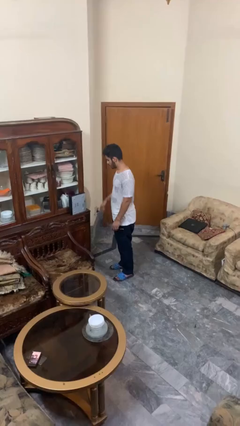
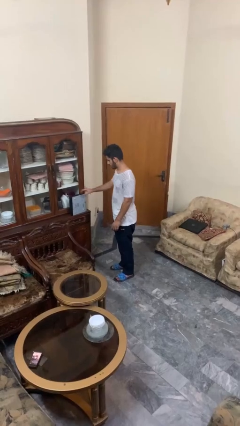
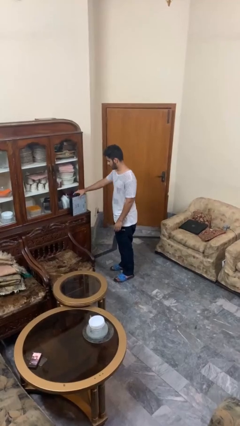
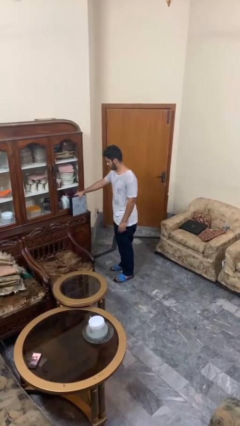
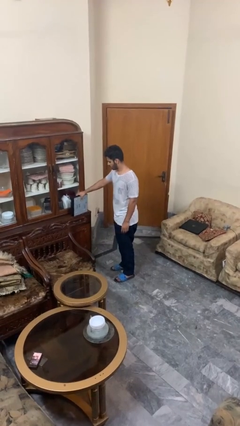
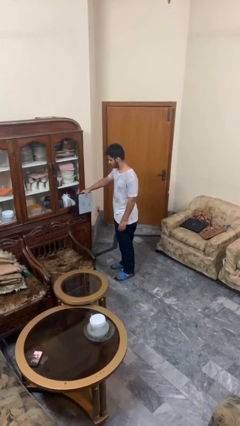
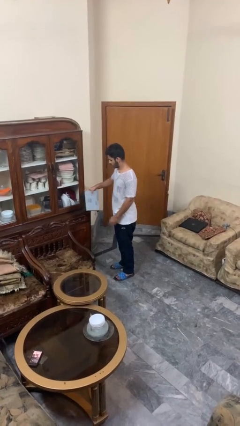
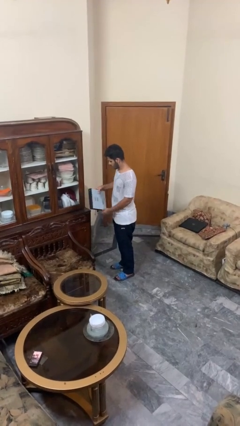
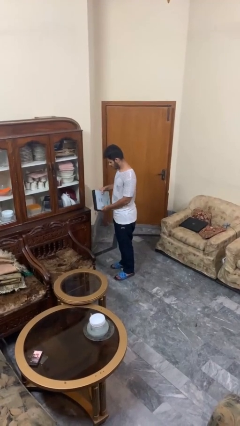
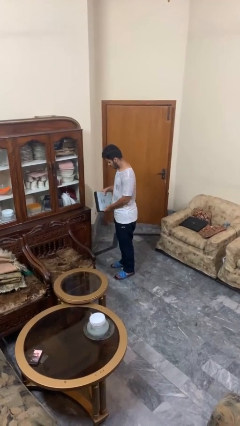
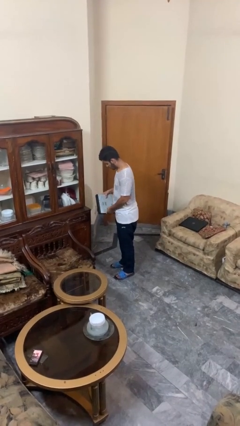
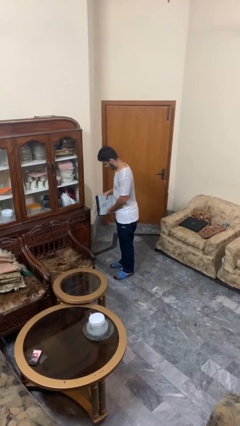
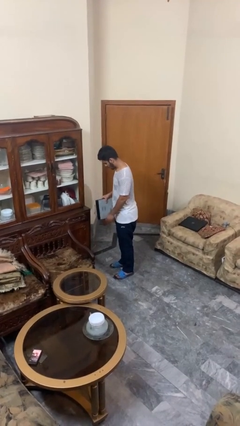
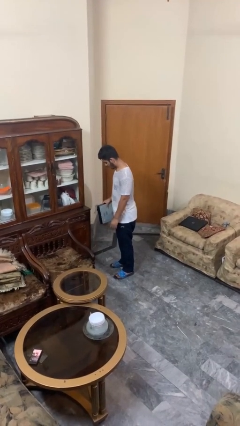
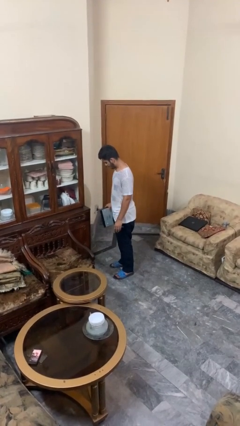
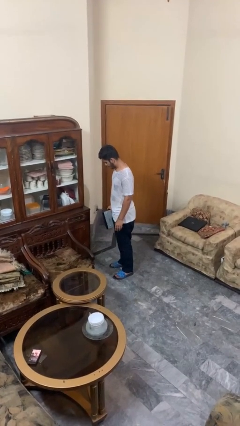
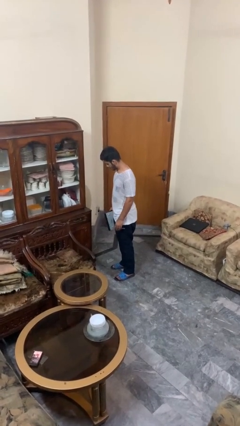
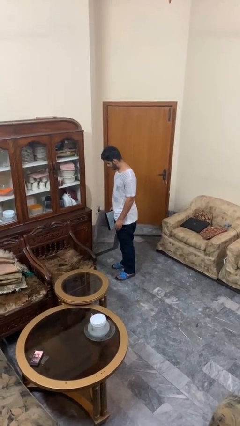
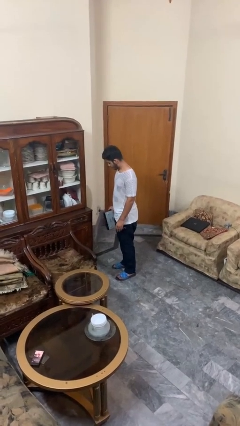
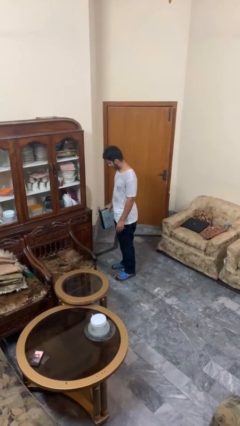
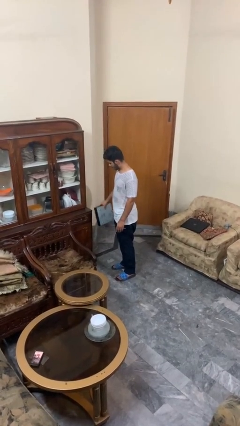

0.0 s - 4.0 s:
person picks up object from countertop

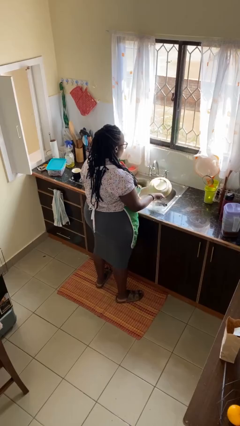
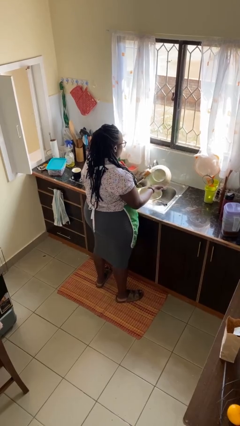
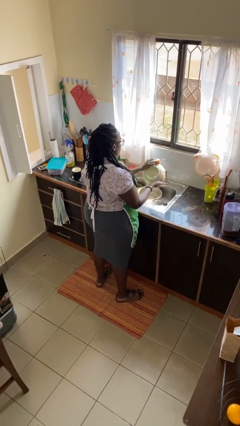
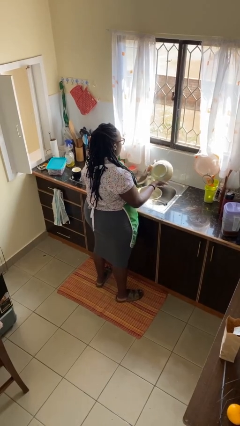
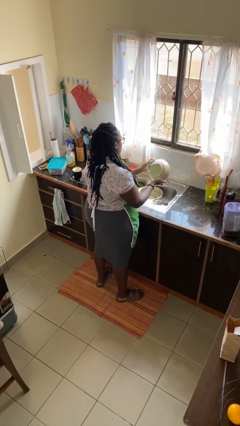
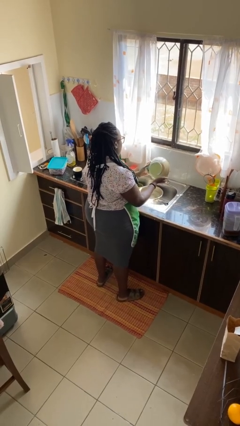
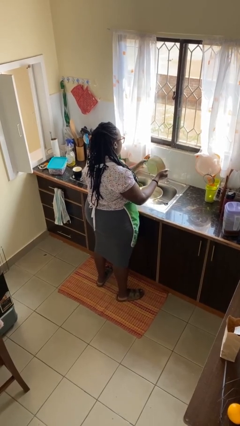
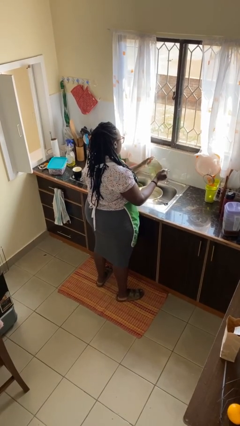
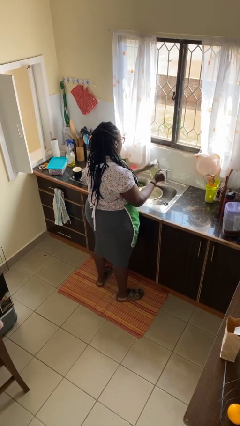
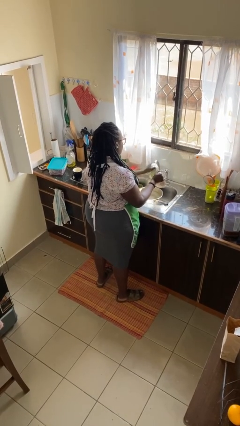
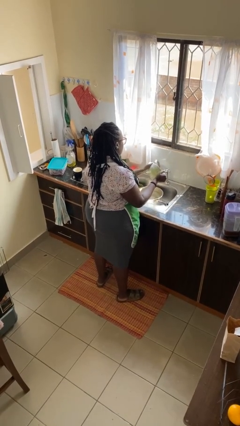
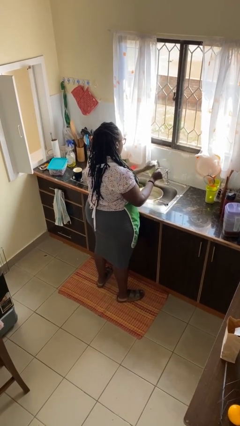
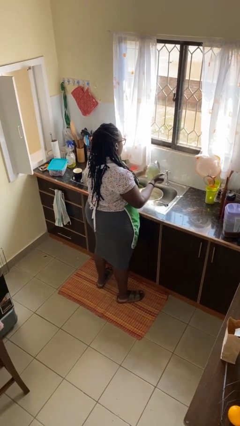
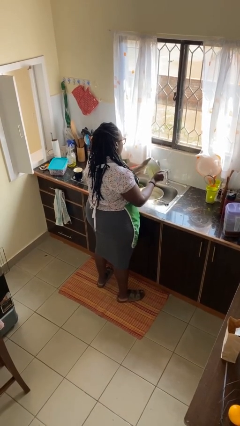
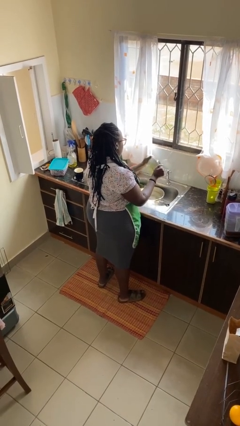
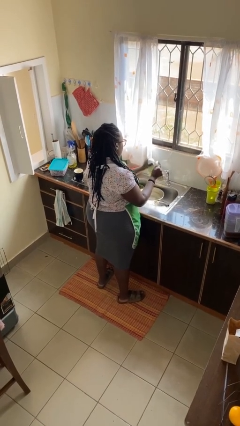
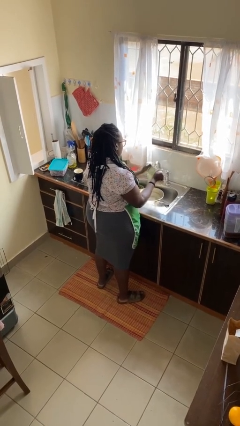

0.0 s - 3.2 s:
person washes dish

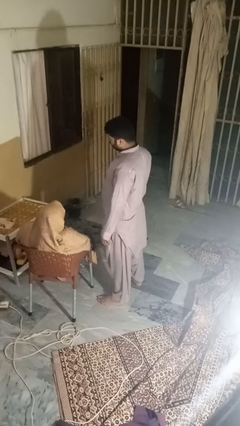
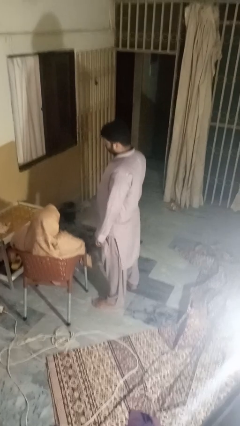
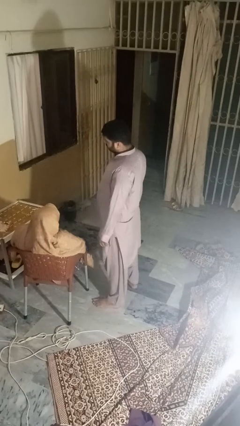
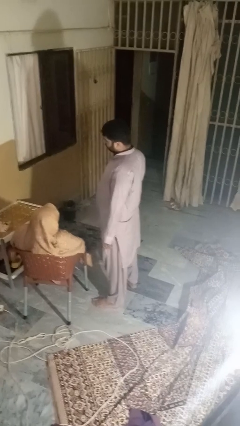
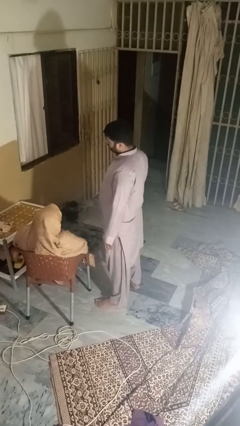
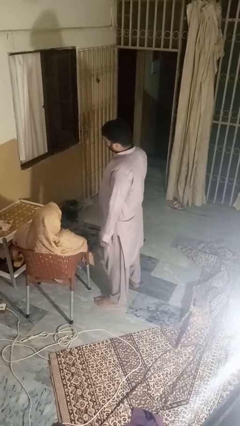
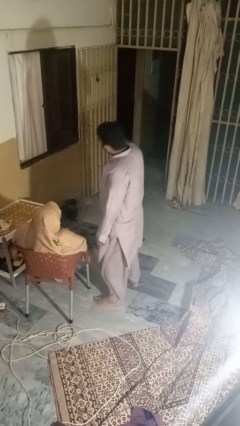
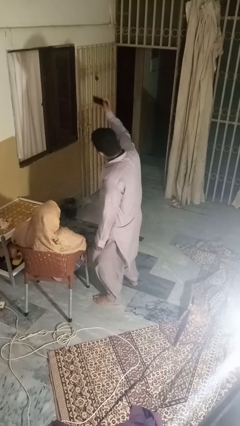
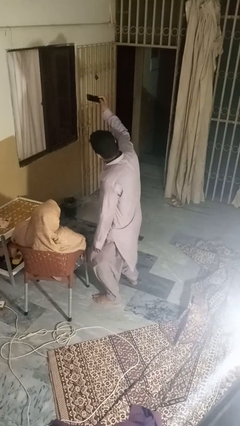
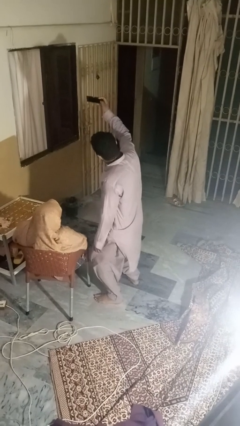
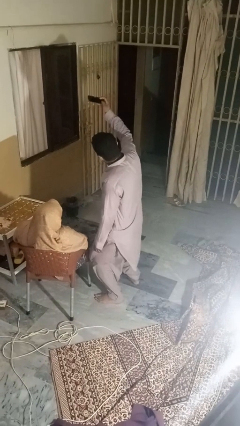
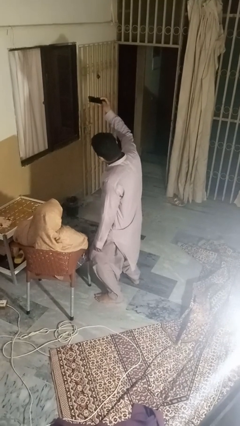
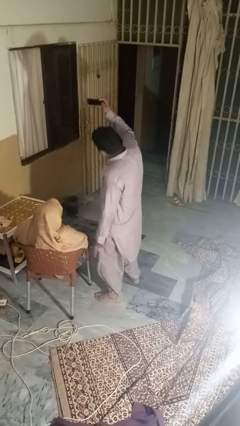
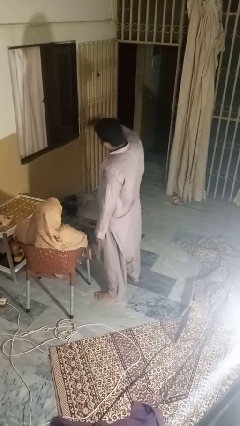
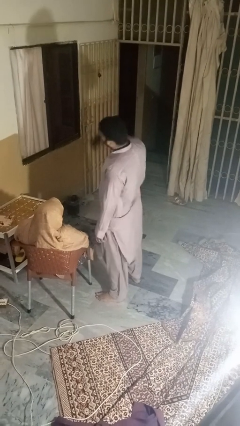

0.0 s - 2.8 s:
person takes selfie with person

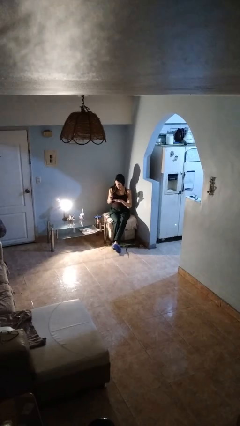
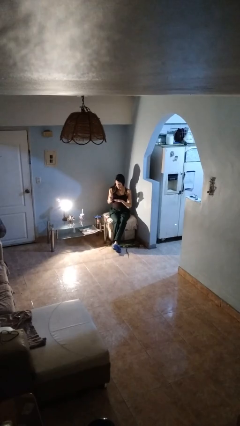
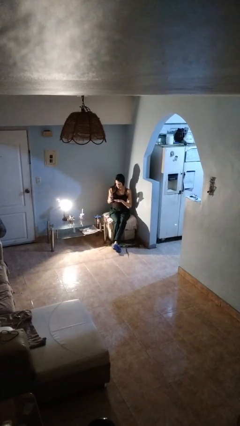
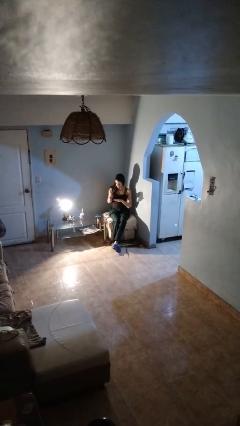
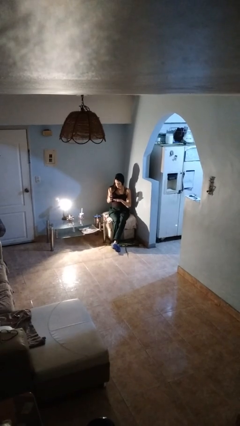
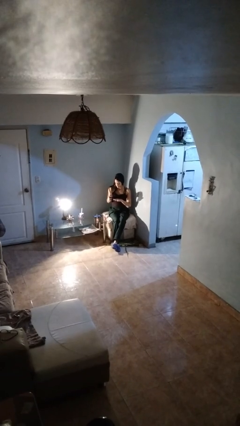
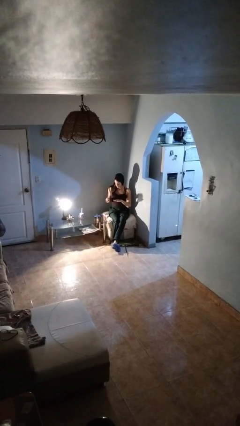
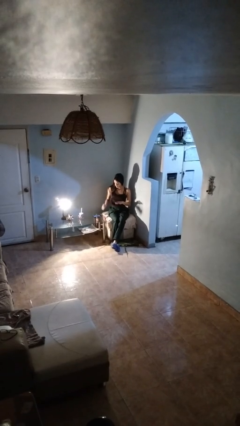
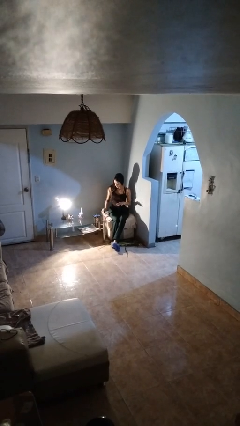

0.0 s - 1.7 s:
person paints fingernails

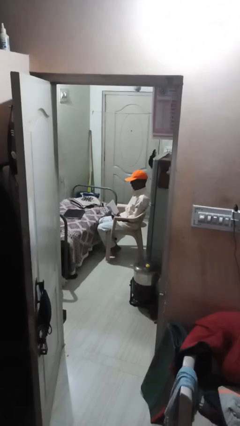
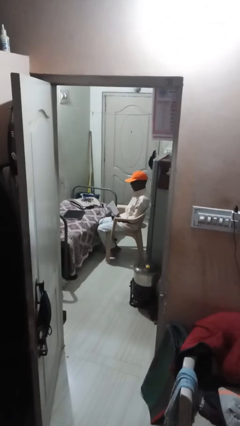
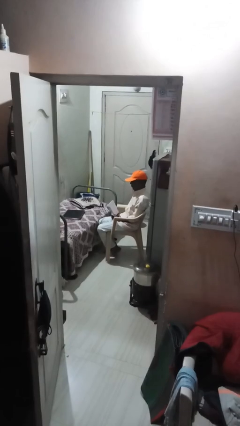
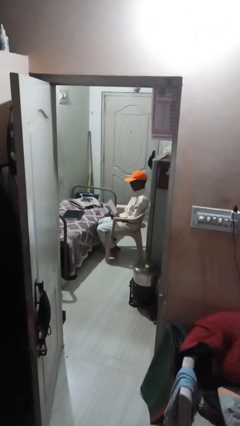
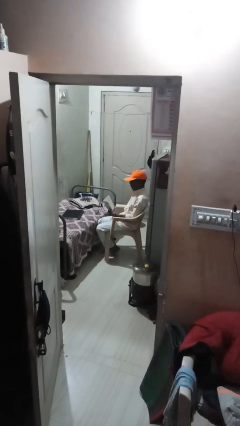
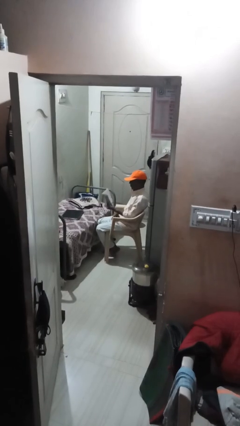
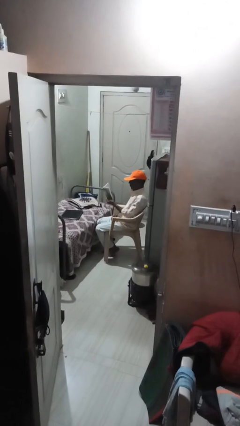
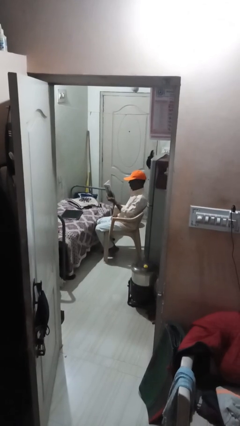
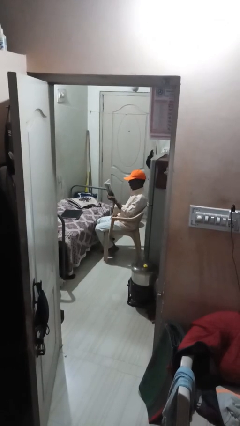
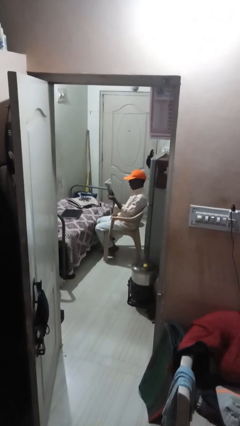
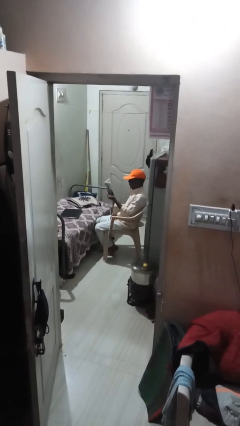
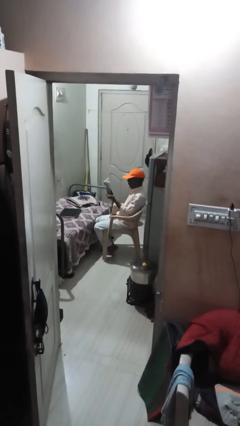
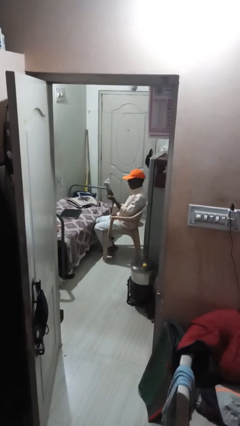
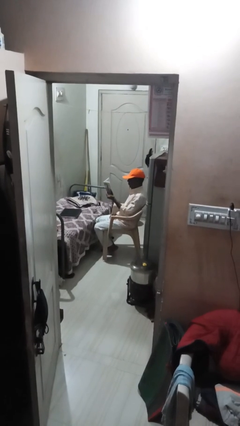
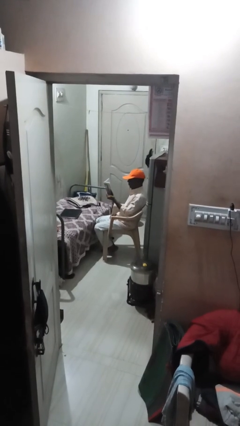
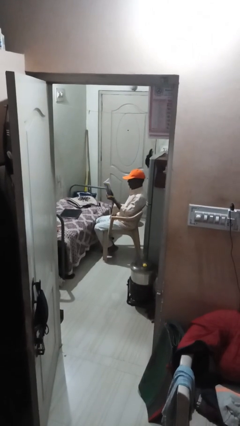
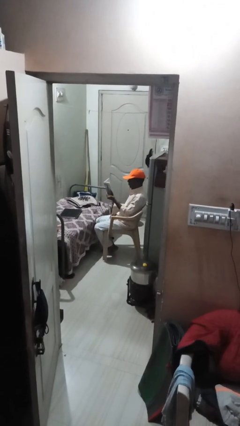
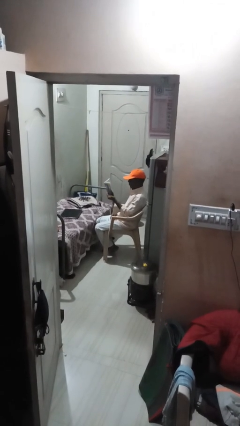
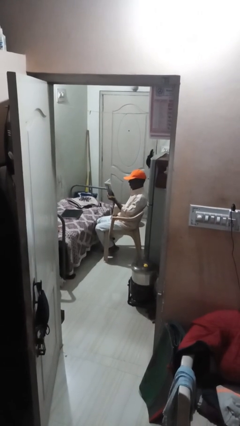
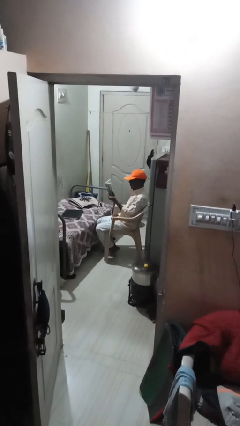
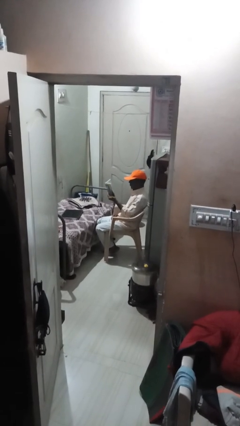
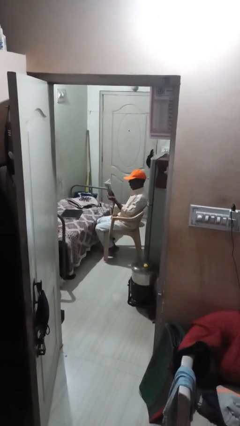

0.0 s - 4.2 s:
person reads document

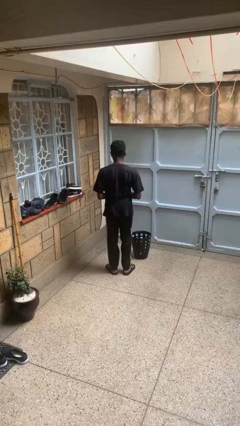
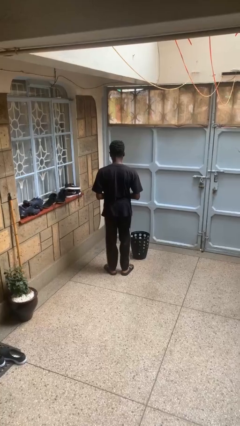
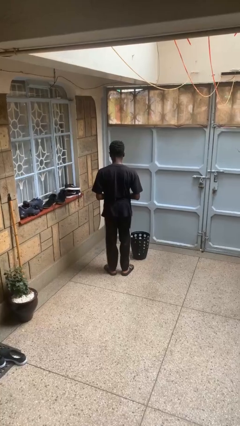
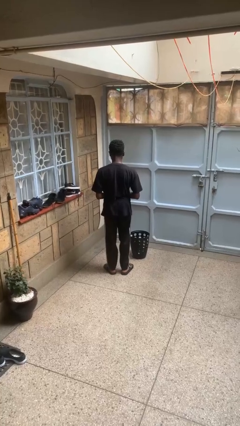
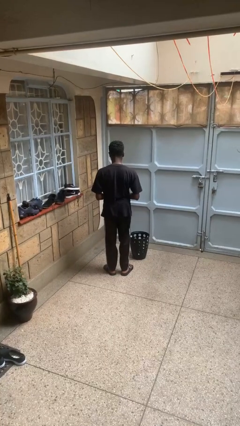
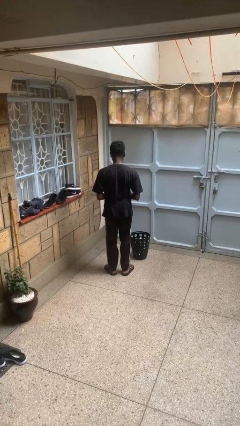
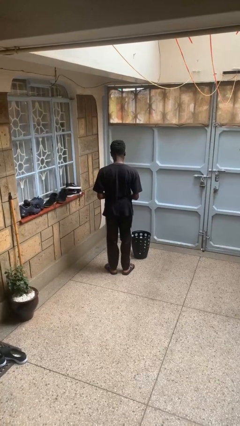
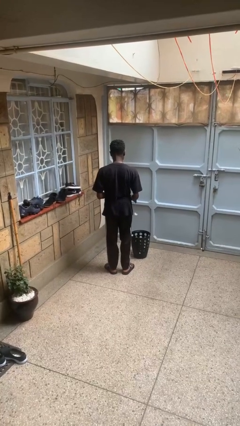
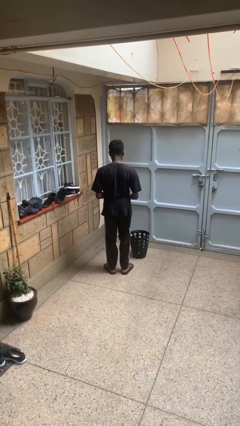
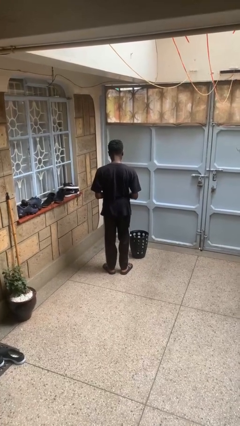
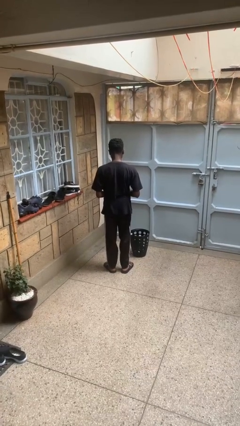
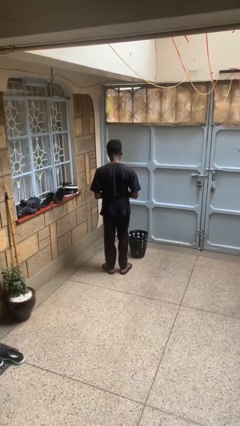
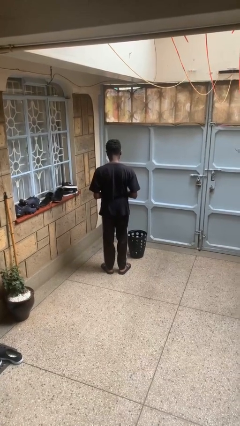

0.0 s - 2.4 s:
person discards trash
